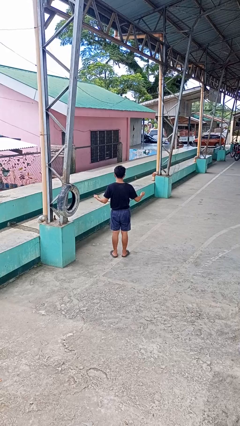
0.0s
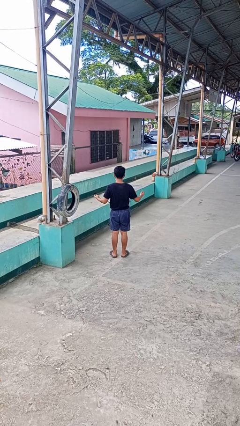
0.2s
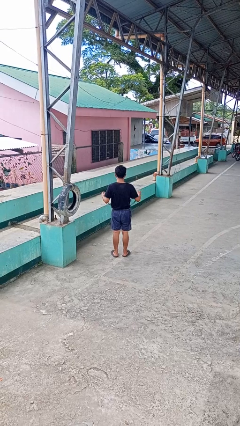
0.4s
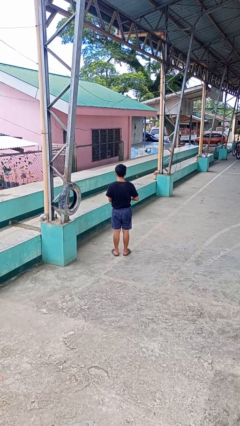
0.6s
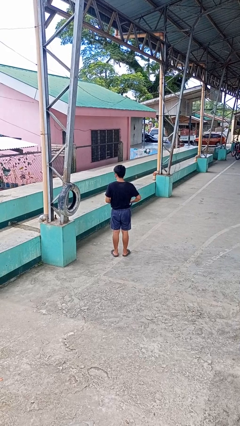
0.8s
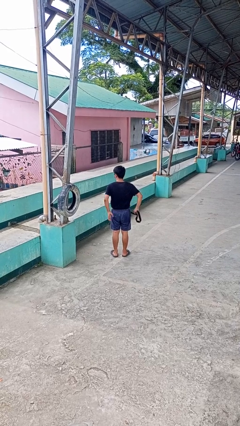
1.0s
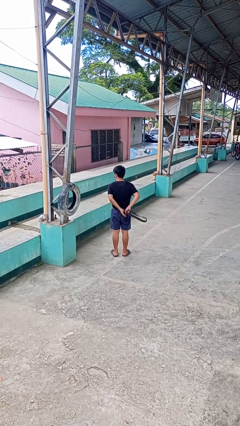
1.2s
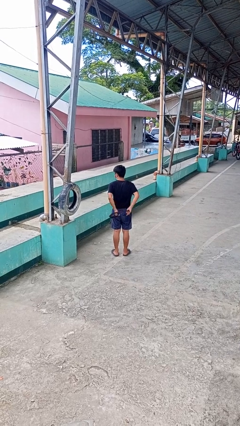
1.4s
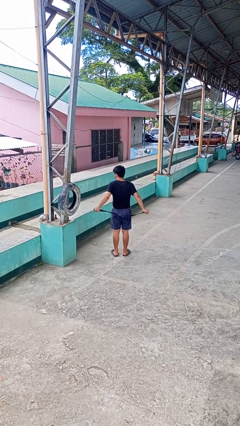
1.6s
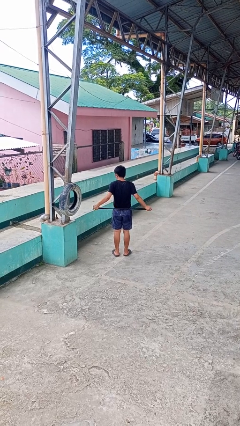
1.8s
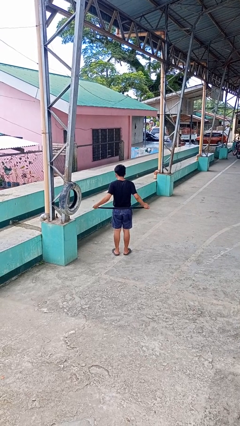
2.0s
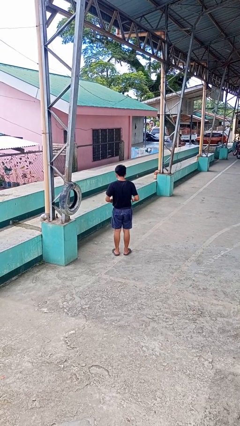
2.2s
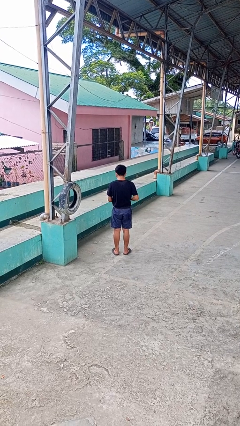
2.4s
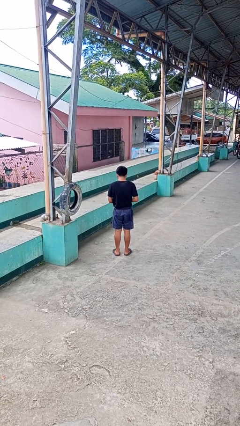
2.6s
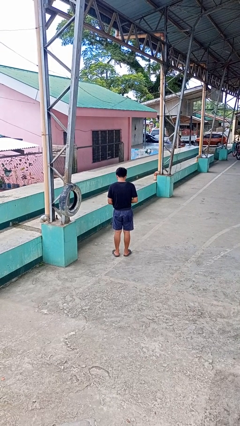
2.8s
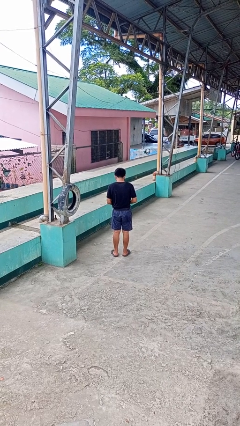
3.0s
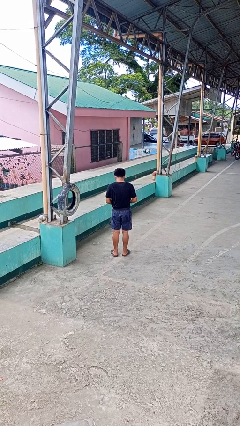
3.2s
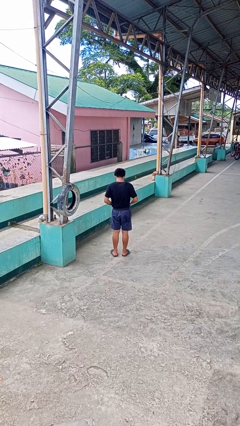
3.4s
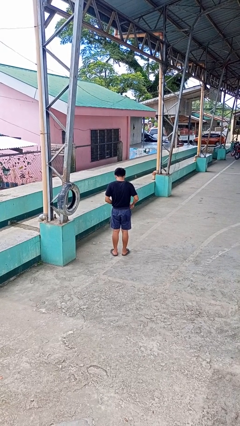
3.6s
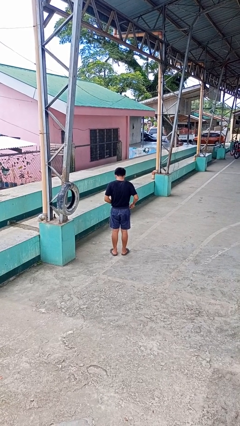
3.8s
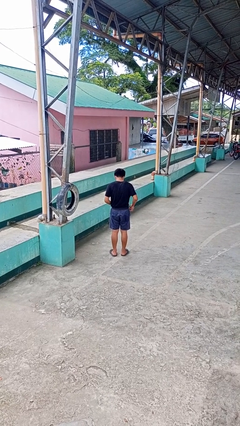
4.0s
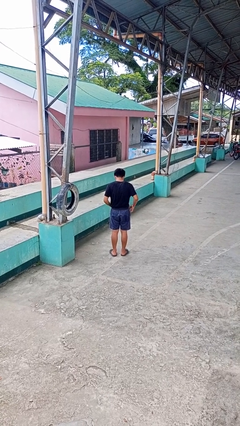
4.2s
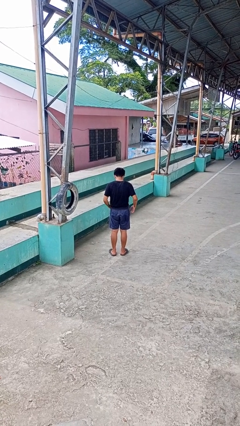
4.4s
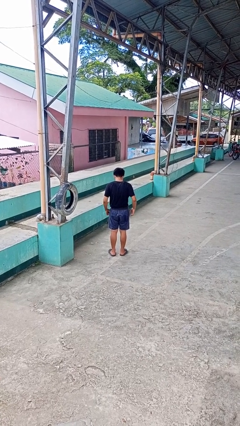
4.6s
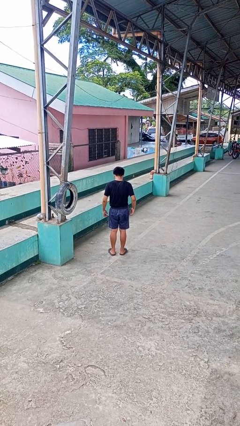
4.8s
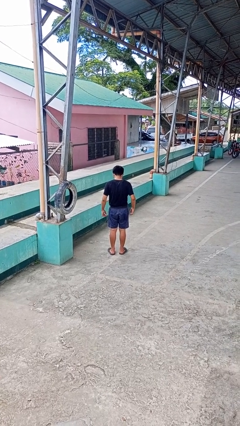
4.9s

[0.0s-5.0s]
person puts on belt

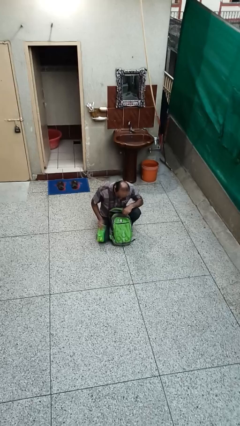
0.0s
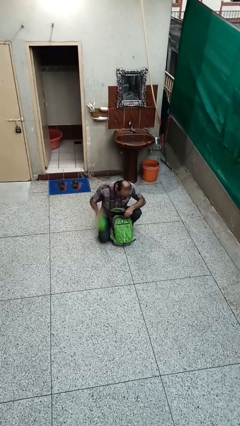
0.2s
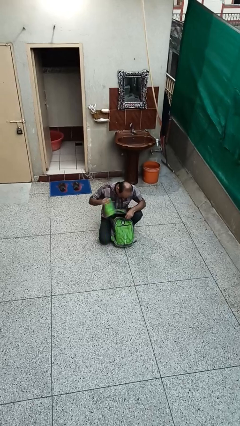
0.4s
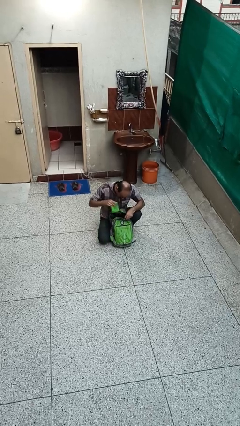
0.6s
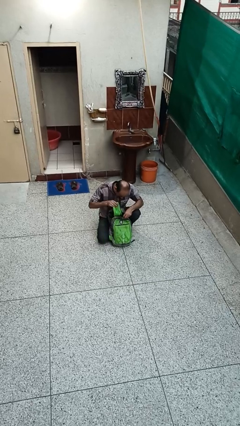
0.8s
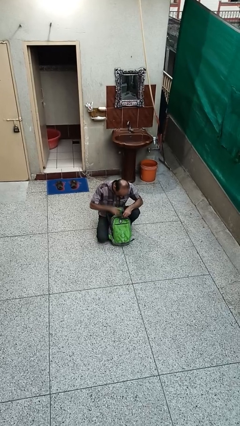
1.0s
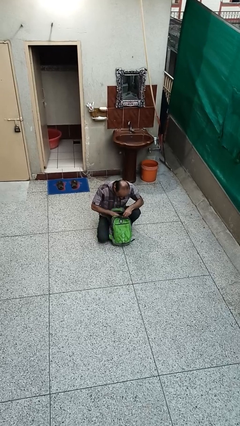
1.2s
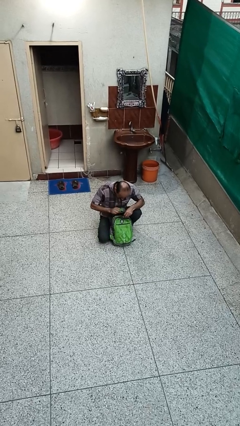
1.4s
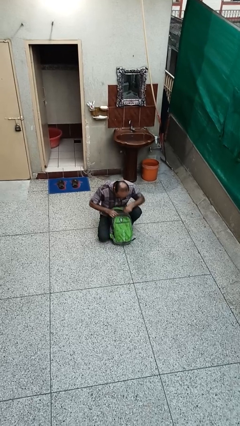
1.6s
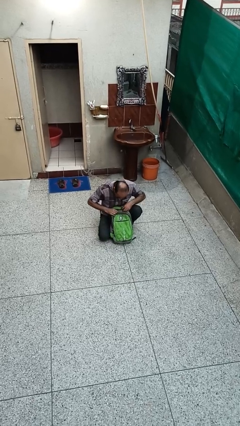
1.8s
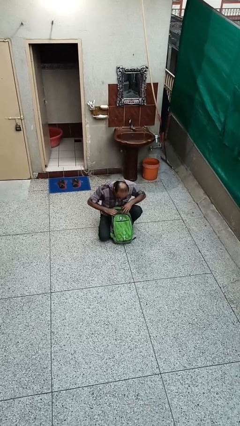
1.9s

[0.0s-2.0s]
person puts object into backpack

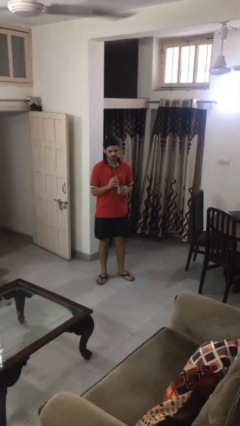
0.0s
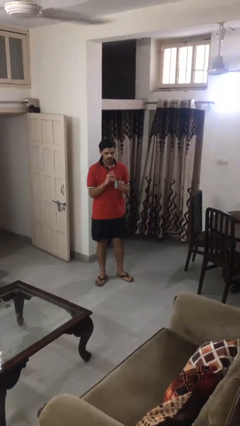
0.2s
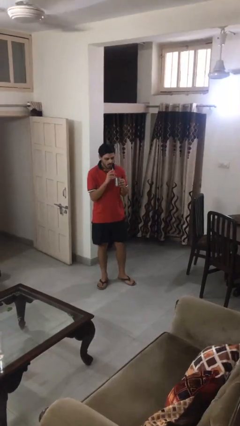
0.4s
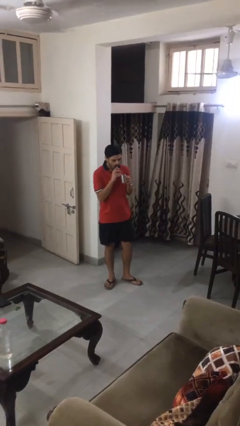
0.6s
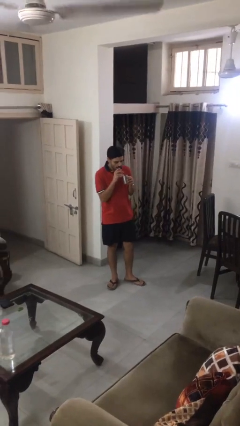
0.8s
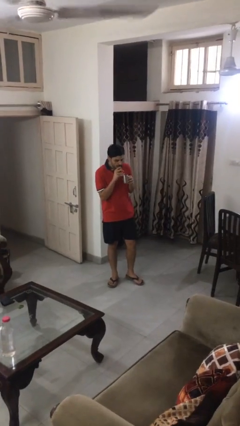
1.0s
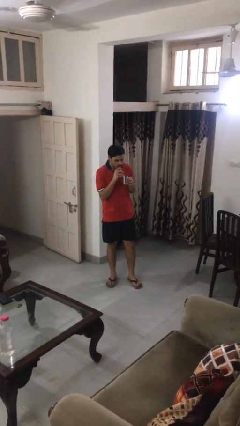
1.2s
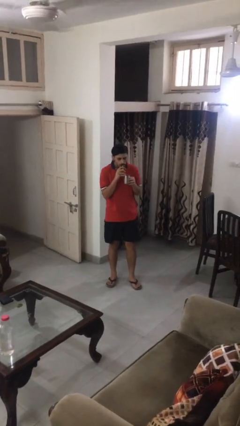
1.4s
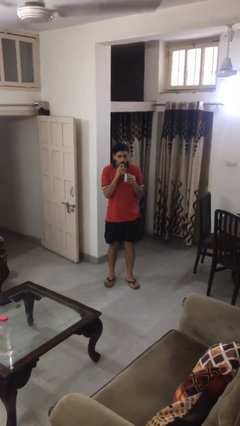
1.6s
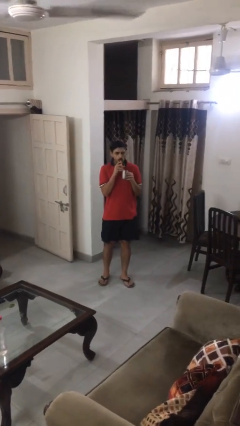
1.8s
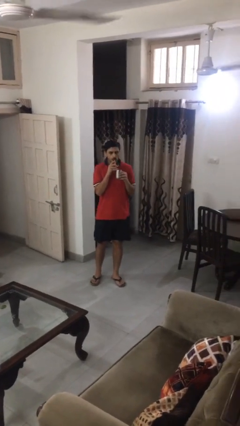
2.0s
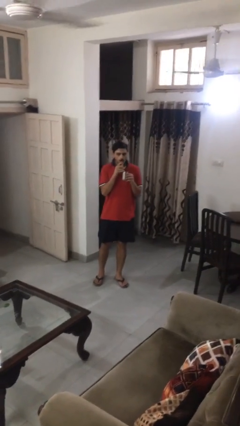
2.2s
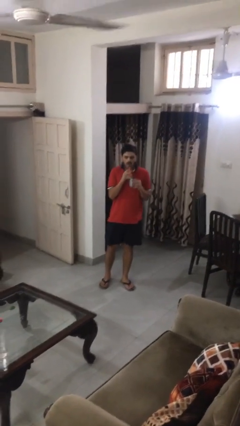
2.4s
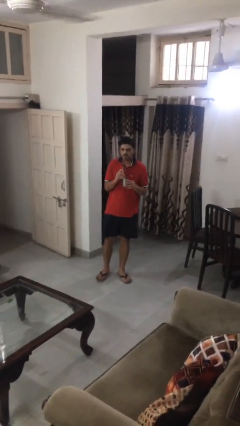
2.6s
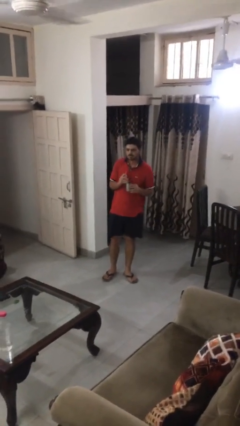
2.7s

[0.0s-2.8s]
person drinks from straw

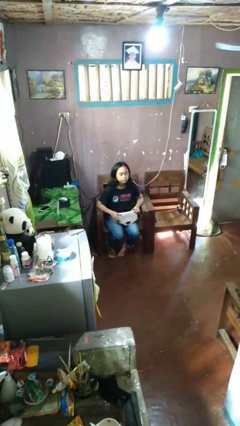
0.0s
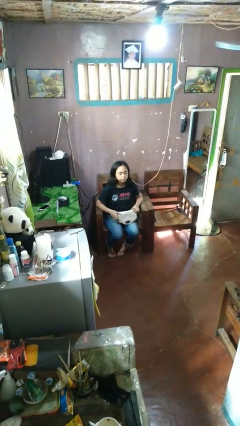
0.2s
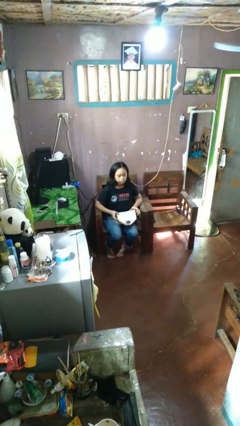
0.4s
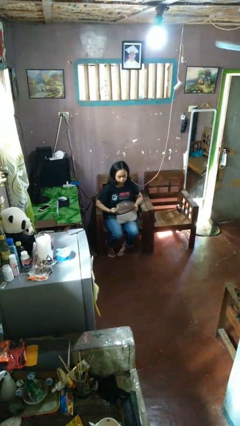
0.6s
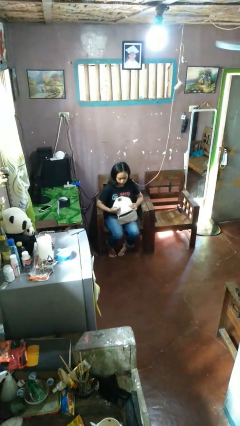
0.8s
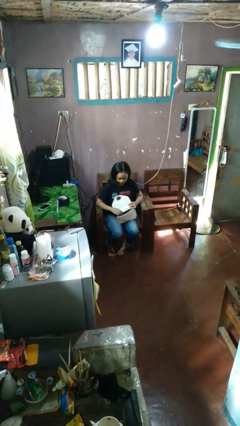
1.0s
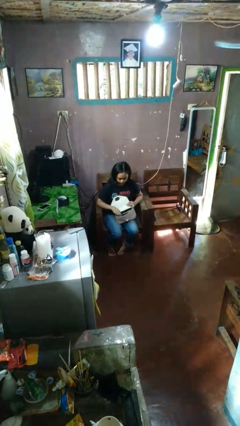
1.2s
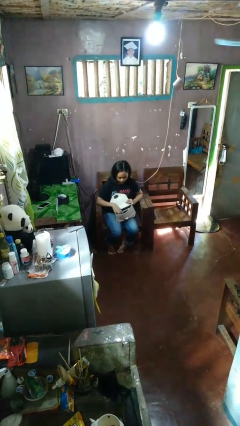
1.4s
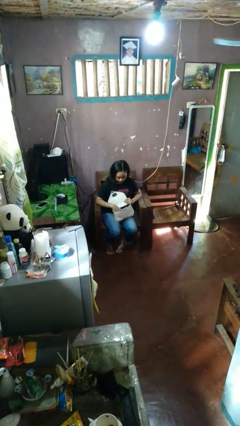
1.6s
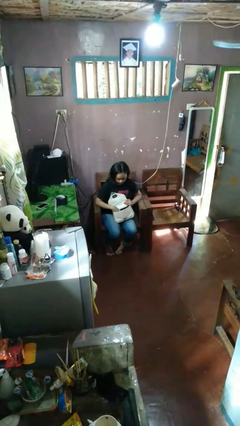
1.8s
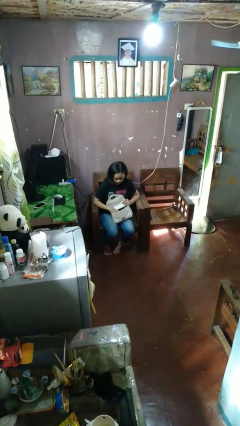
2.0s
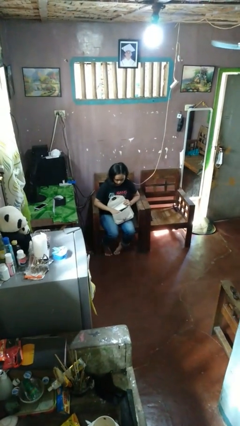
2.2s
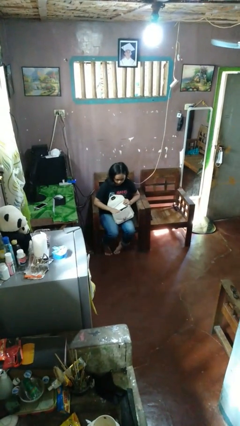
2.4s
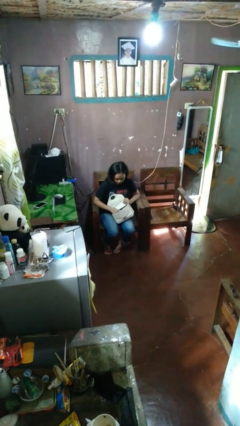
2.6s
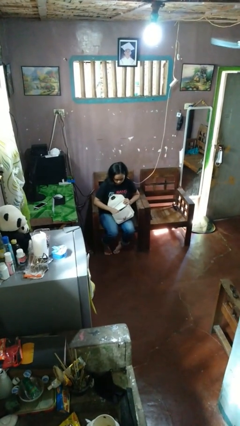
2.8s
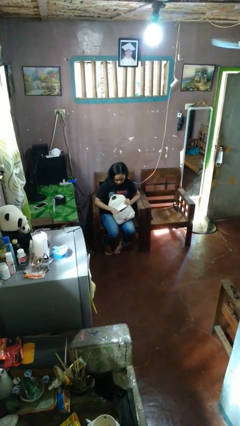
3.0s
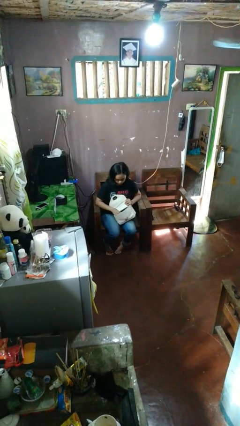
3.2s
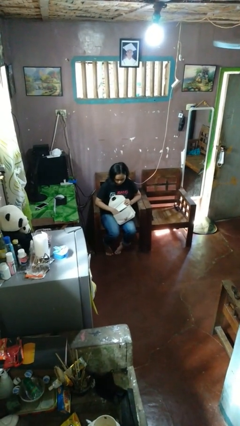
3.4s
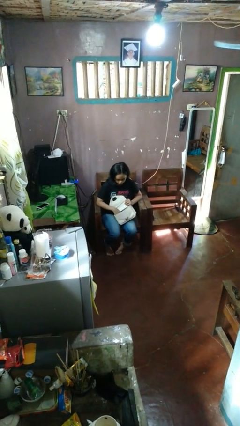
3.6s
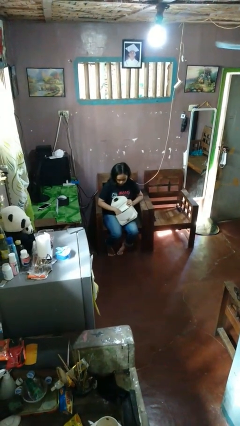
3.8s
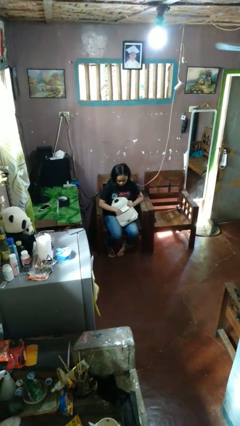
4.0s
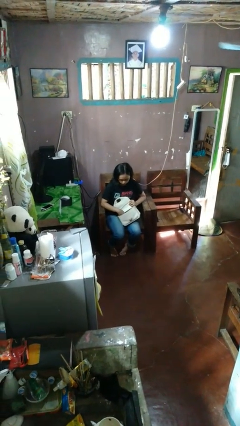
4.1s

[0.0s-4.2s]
person searches in purse

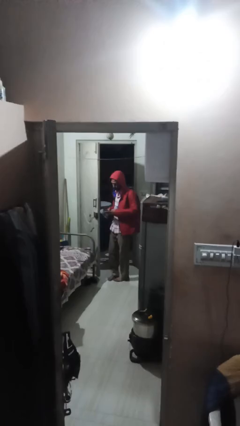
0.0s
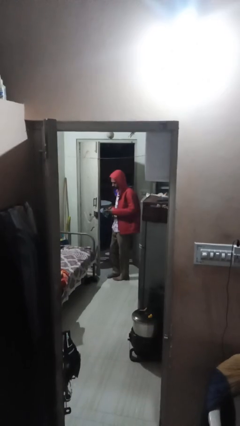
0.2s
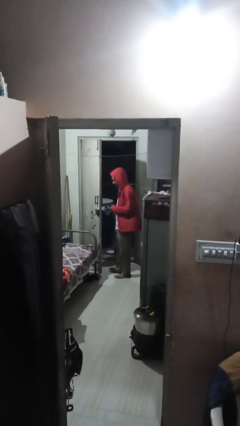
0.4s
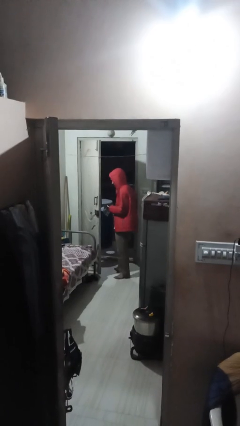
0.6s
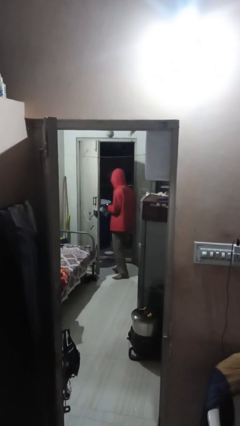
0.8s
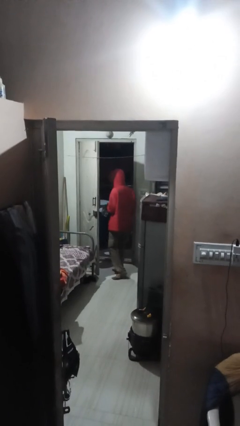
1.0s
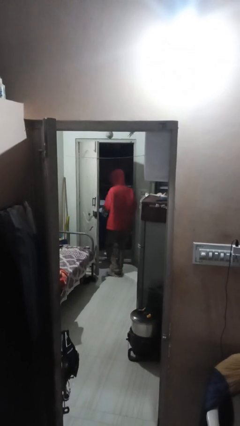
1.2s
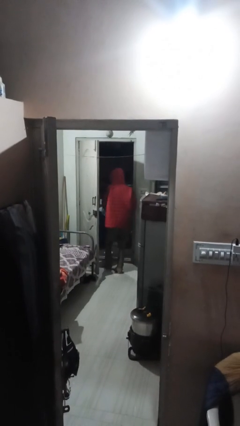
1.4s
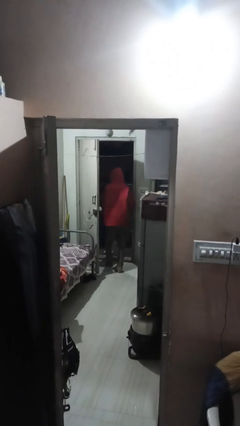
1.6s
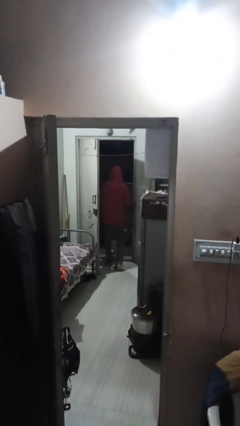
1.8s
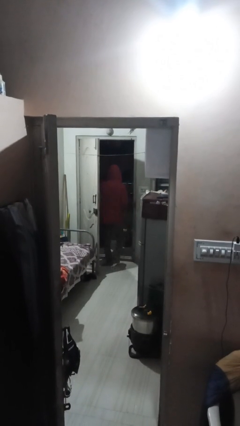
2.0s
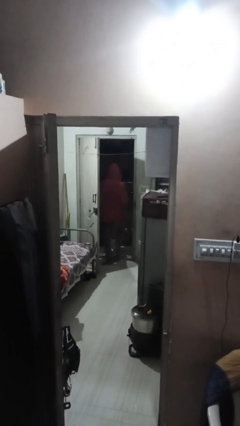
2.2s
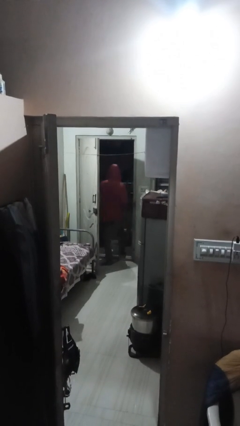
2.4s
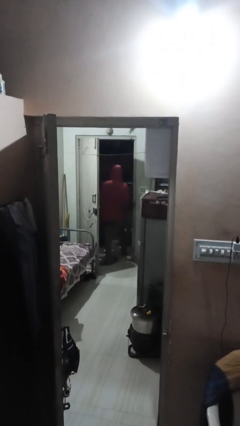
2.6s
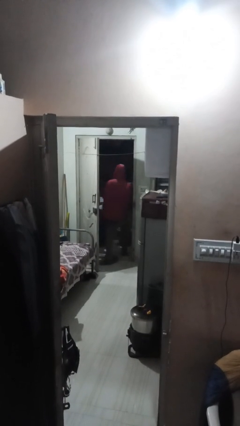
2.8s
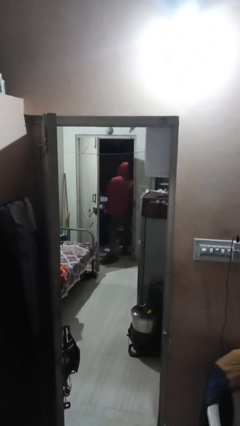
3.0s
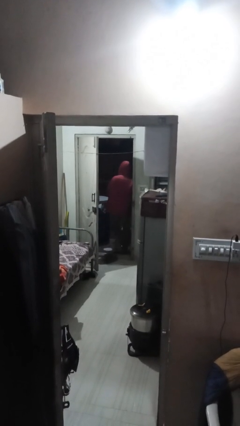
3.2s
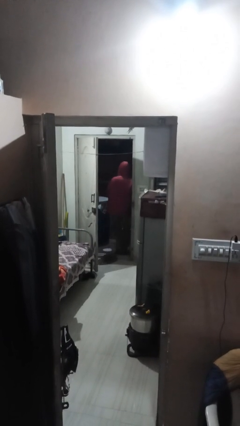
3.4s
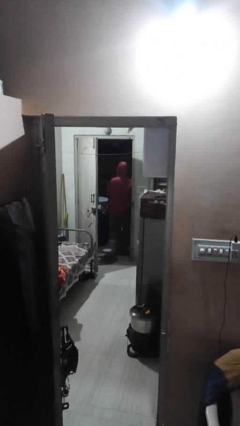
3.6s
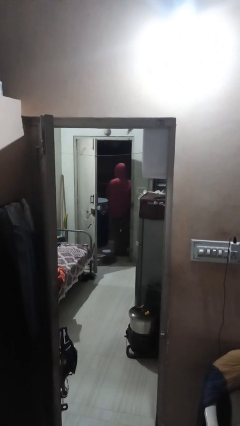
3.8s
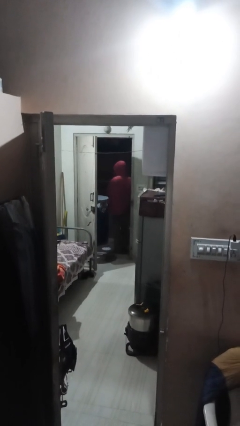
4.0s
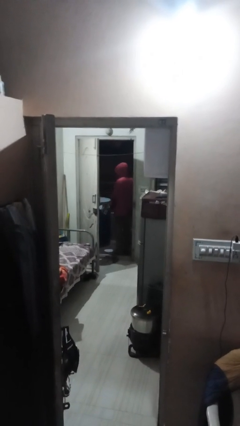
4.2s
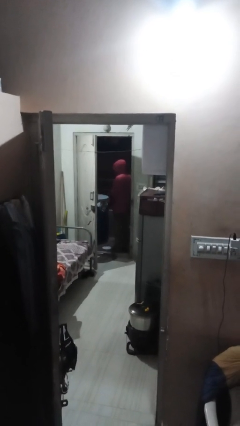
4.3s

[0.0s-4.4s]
person exits scene through structure
